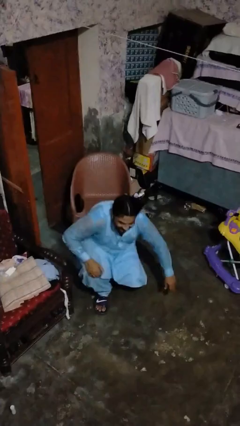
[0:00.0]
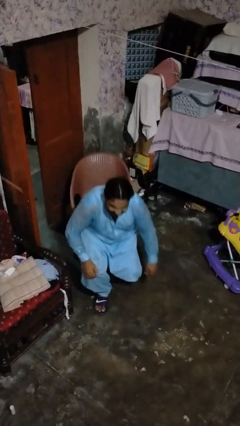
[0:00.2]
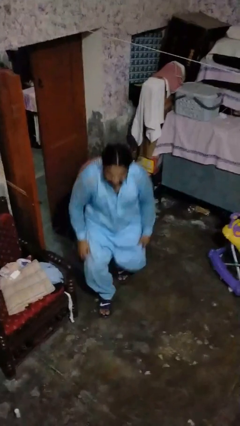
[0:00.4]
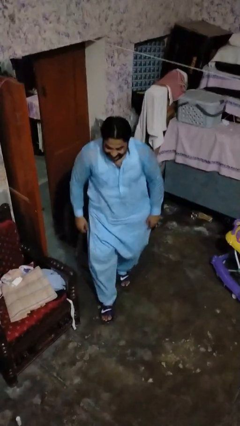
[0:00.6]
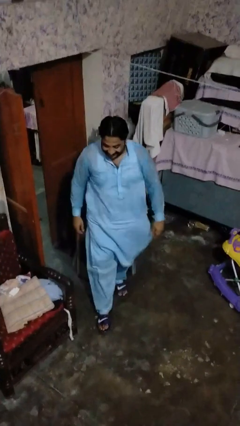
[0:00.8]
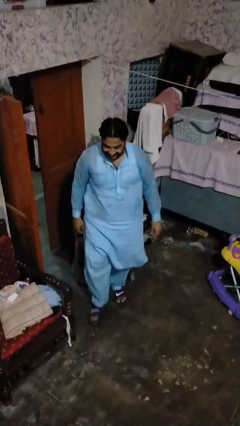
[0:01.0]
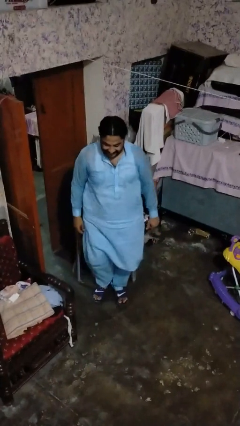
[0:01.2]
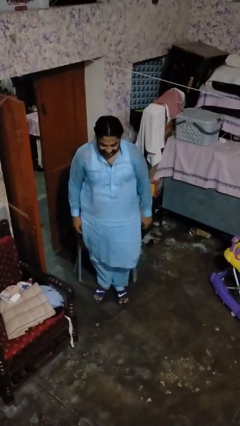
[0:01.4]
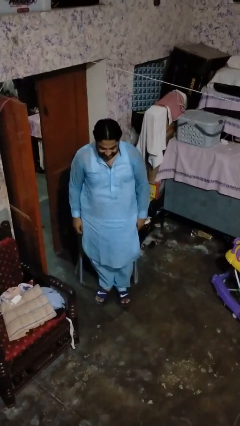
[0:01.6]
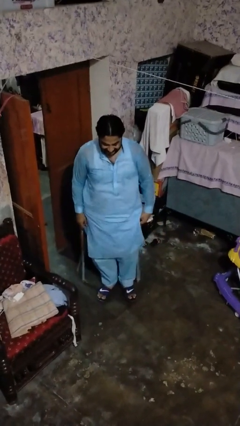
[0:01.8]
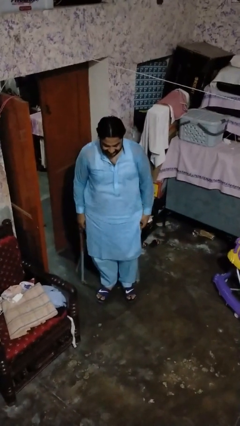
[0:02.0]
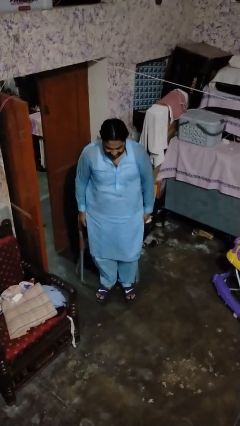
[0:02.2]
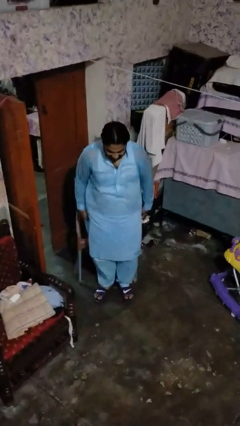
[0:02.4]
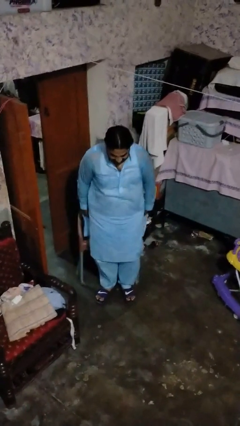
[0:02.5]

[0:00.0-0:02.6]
person stands up from floor

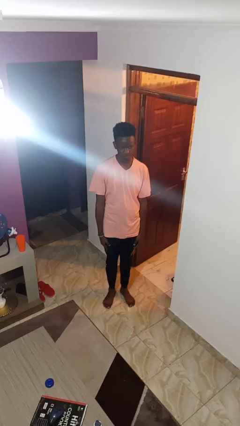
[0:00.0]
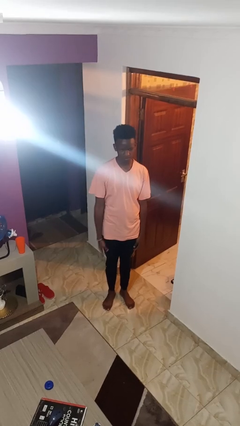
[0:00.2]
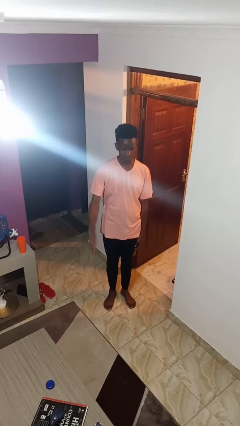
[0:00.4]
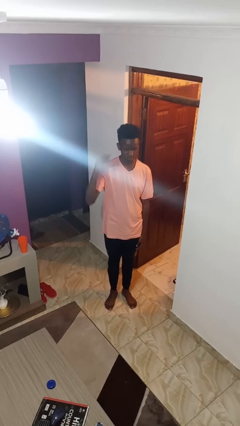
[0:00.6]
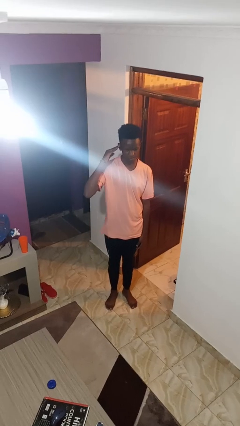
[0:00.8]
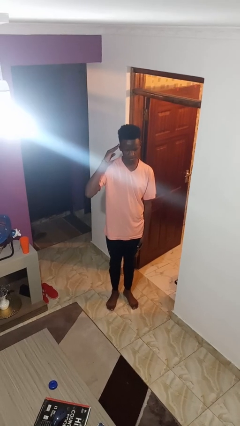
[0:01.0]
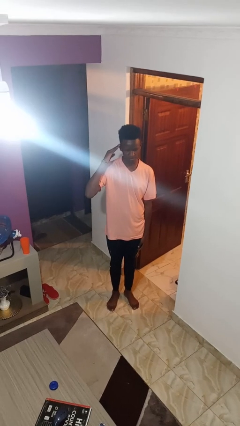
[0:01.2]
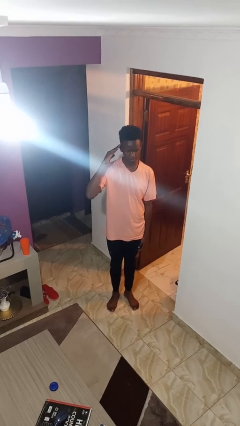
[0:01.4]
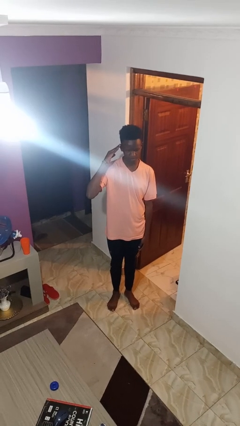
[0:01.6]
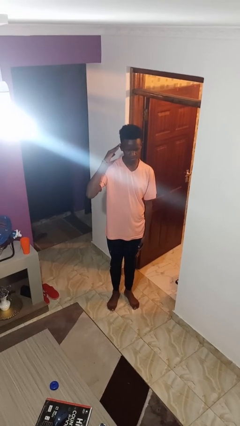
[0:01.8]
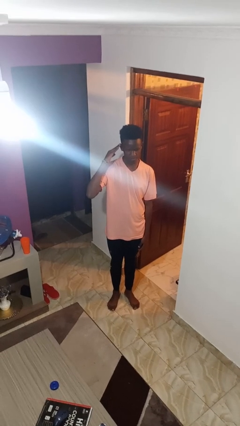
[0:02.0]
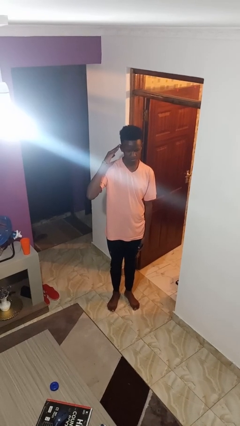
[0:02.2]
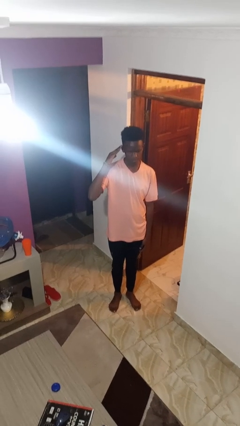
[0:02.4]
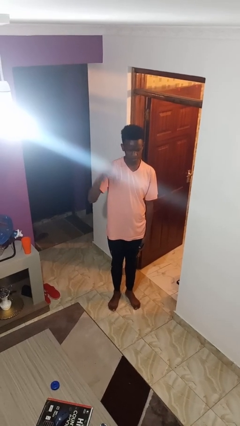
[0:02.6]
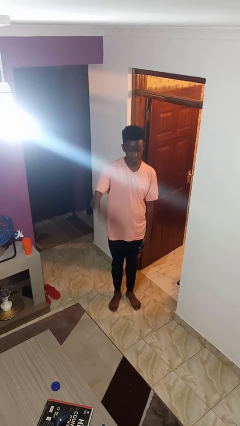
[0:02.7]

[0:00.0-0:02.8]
person salutes

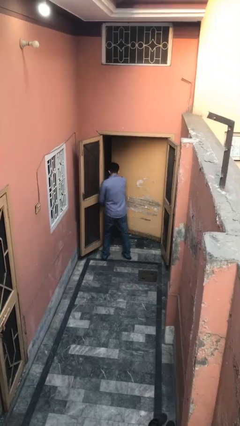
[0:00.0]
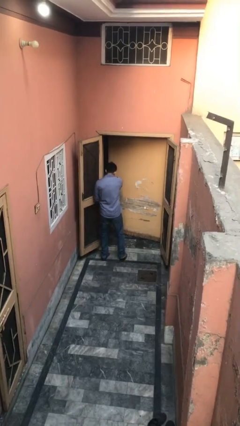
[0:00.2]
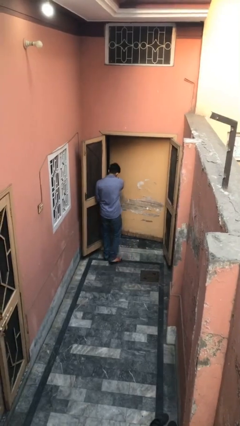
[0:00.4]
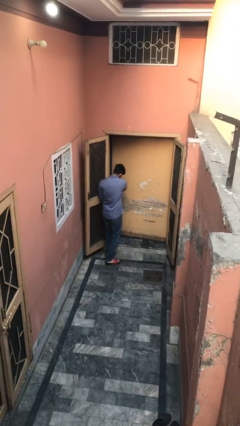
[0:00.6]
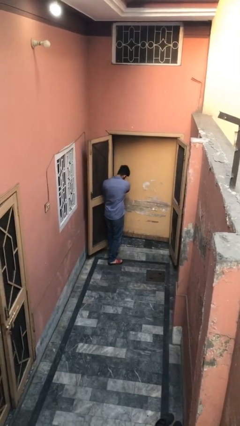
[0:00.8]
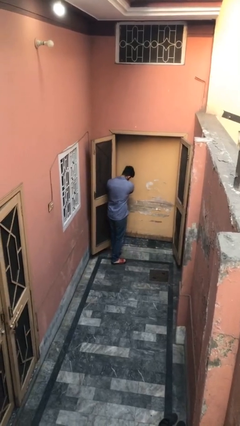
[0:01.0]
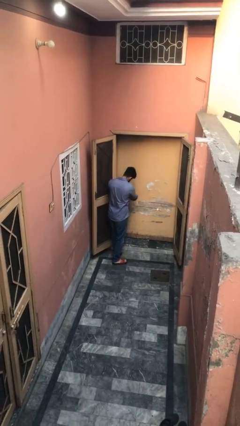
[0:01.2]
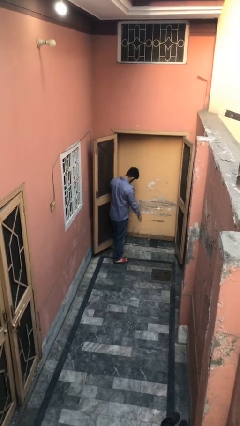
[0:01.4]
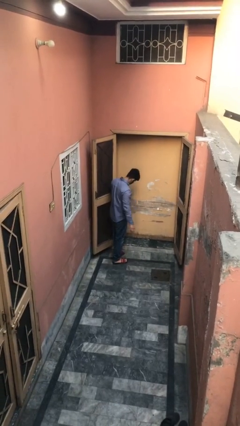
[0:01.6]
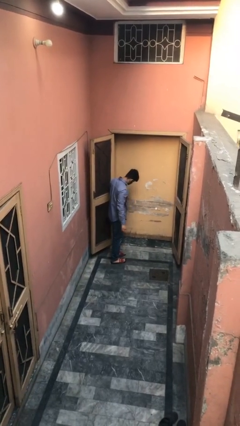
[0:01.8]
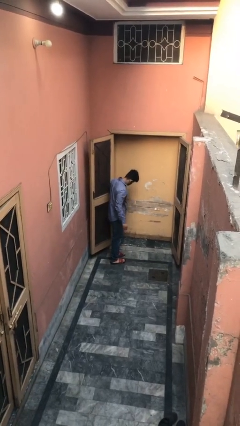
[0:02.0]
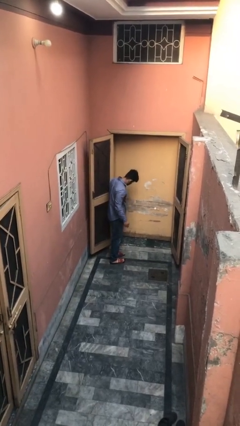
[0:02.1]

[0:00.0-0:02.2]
person closes facility door

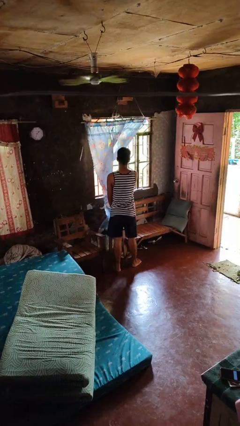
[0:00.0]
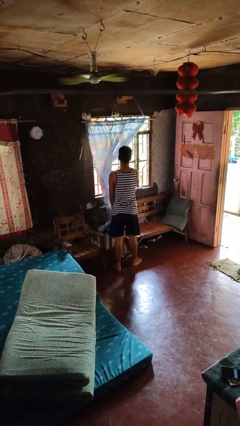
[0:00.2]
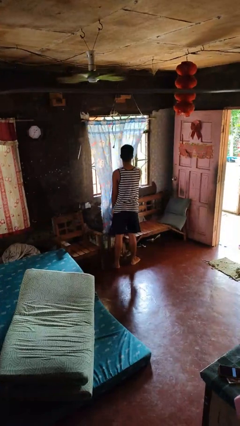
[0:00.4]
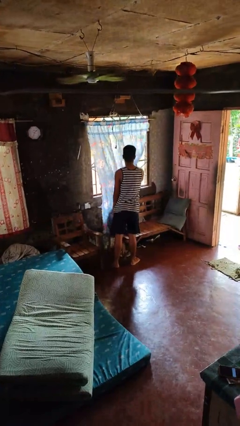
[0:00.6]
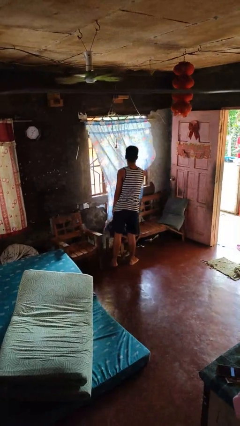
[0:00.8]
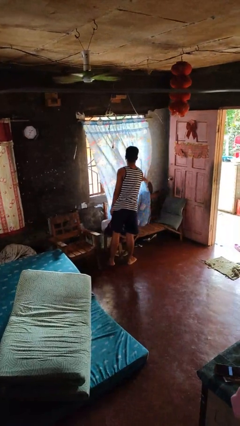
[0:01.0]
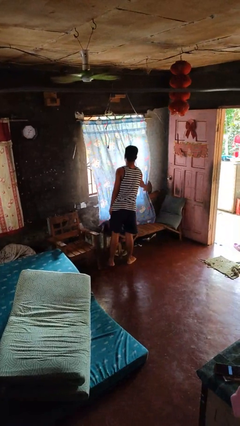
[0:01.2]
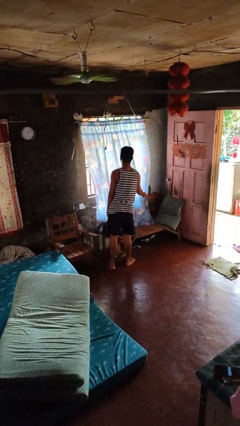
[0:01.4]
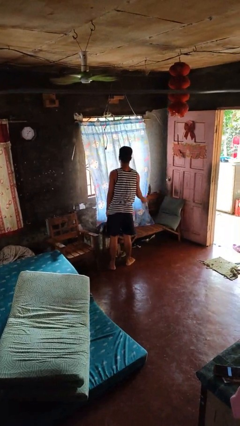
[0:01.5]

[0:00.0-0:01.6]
person closes curtains

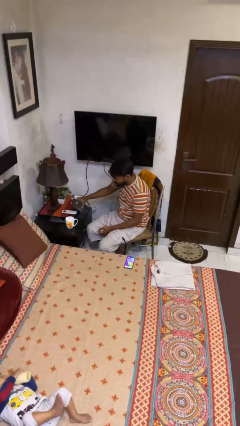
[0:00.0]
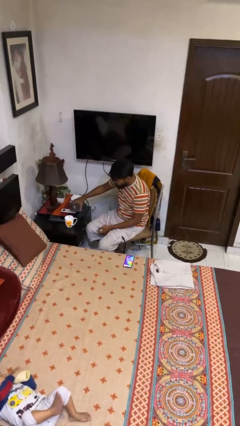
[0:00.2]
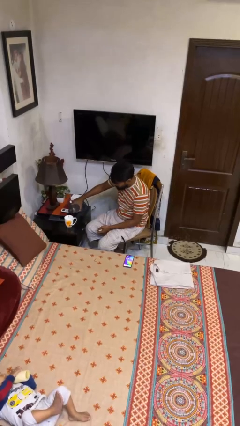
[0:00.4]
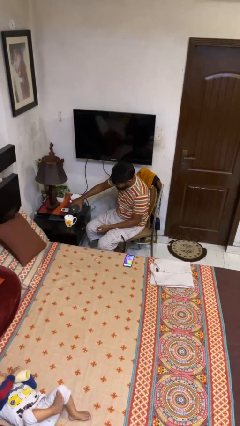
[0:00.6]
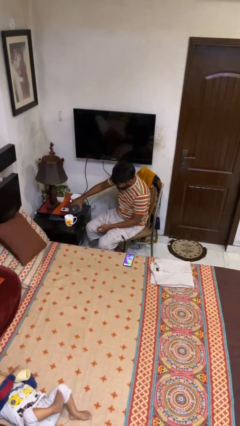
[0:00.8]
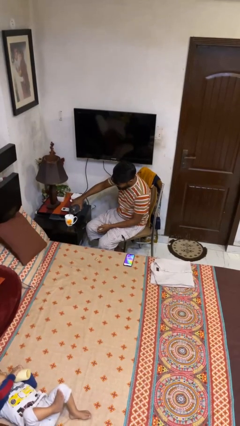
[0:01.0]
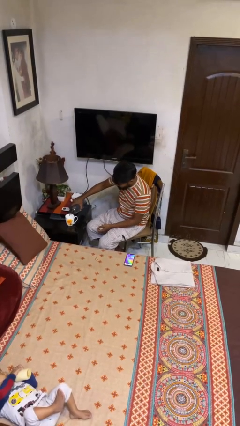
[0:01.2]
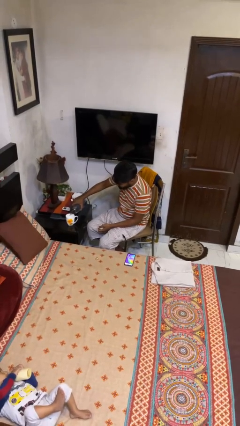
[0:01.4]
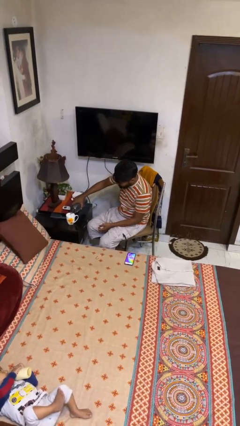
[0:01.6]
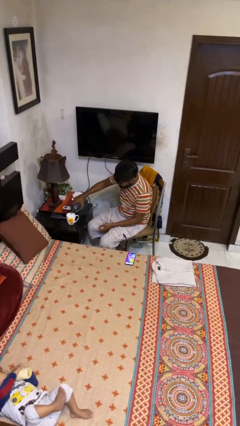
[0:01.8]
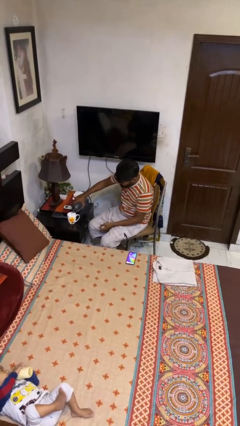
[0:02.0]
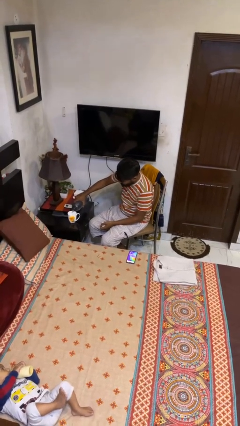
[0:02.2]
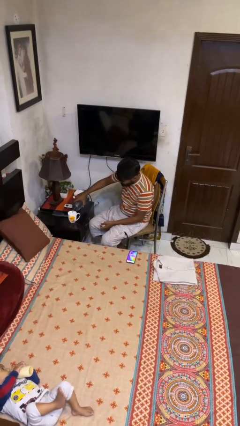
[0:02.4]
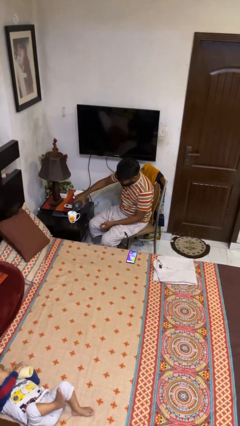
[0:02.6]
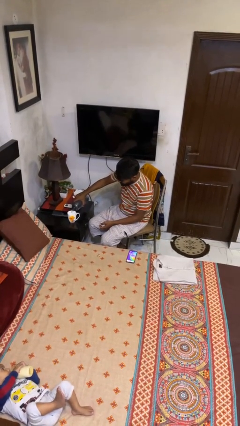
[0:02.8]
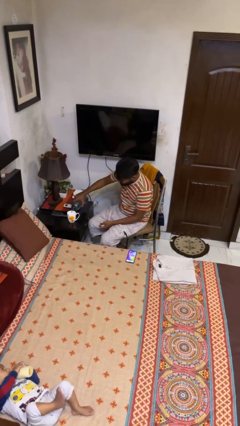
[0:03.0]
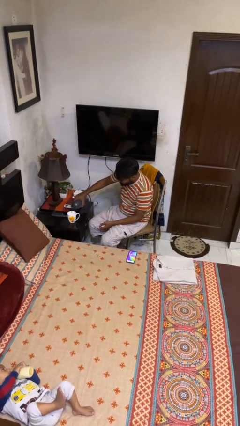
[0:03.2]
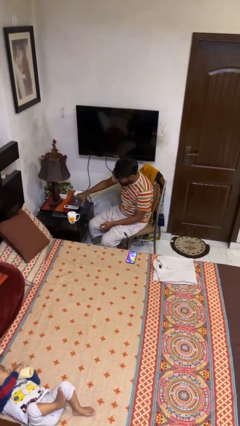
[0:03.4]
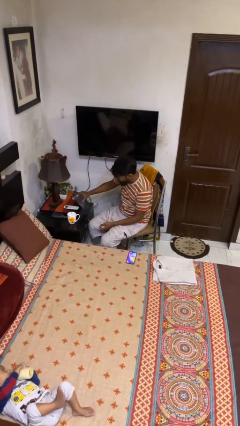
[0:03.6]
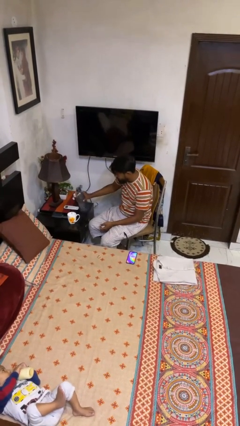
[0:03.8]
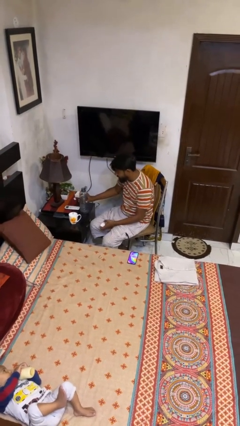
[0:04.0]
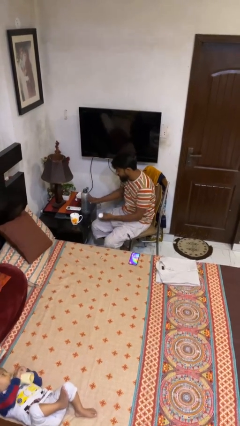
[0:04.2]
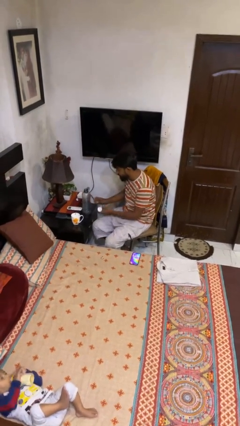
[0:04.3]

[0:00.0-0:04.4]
person pours liquid into cup

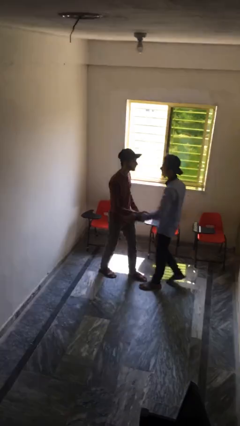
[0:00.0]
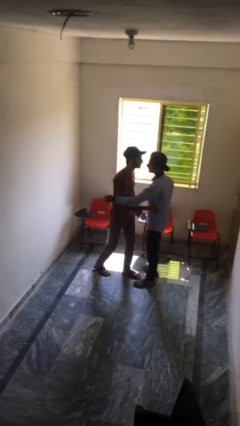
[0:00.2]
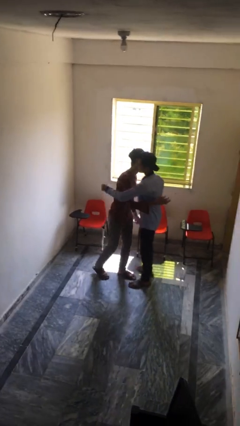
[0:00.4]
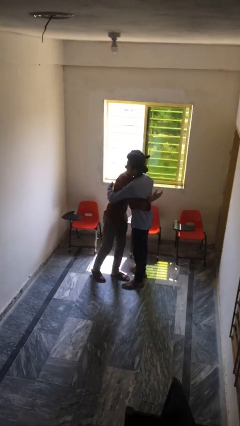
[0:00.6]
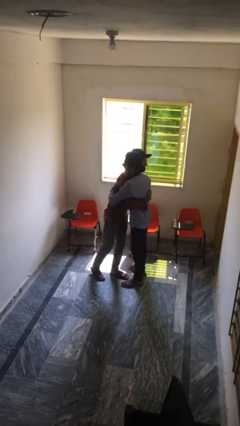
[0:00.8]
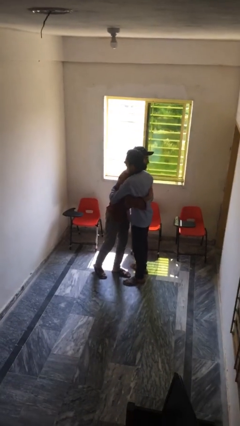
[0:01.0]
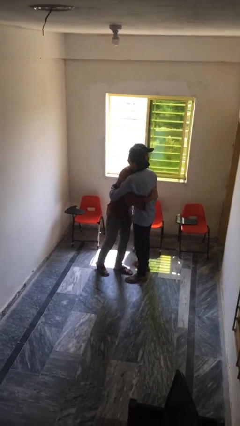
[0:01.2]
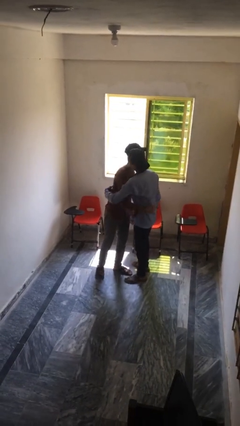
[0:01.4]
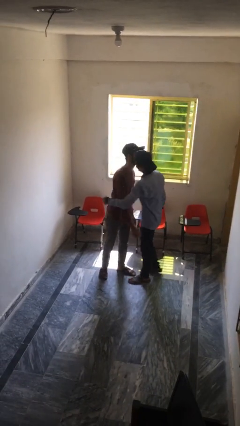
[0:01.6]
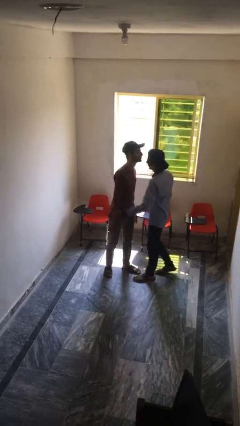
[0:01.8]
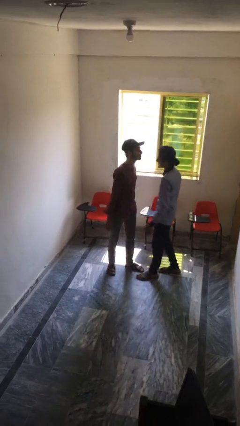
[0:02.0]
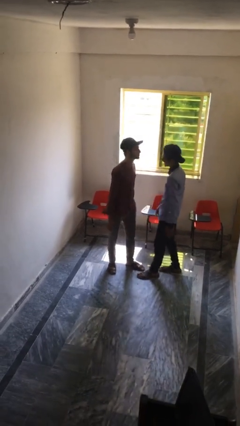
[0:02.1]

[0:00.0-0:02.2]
person embraces person

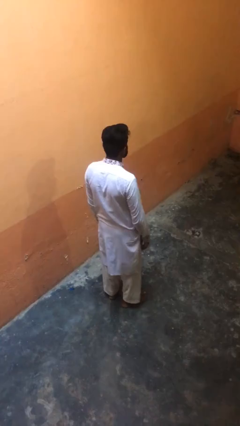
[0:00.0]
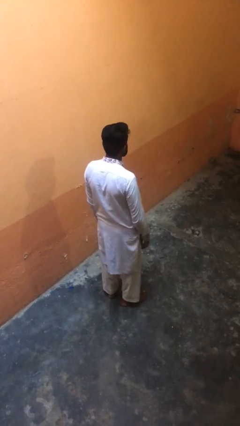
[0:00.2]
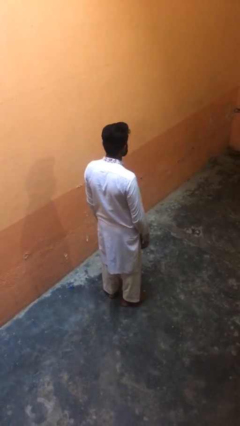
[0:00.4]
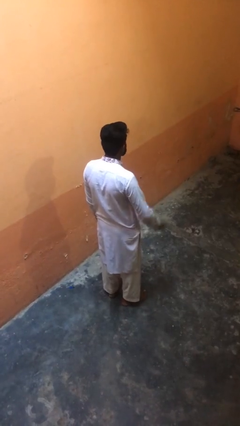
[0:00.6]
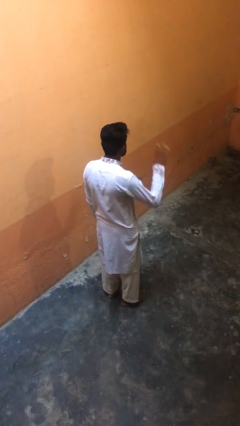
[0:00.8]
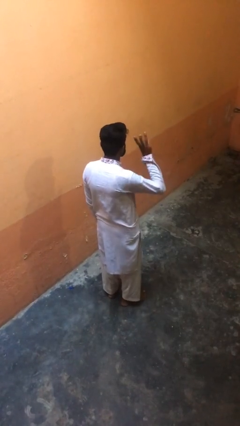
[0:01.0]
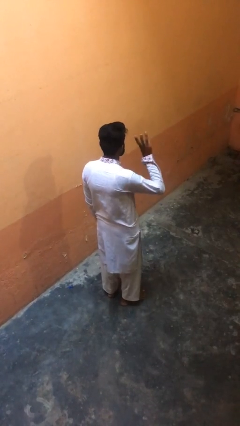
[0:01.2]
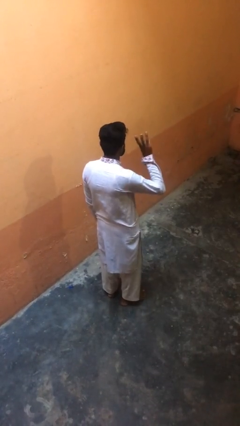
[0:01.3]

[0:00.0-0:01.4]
person gestures number three
